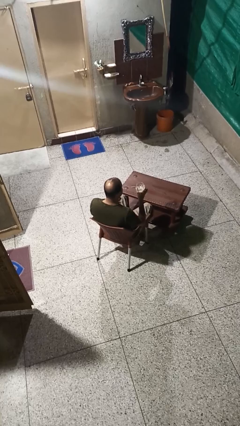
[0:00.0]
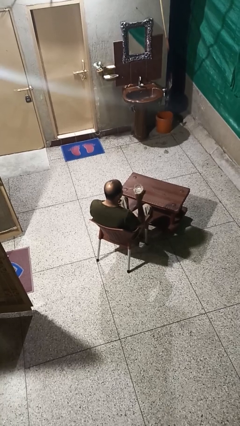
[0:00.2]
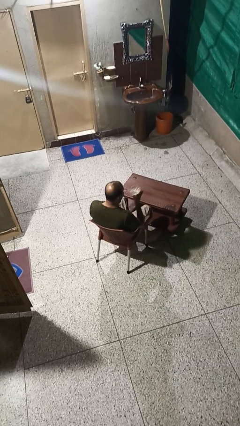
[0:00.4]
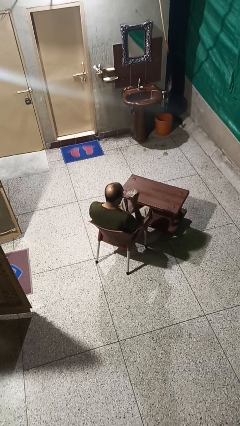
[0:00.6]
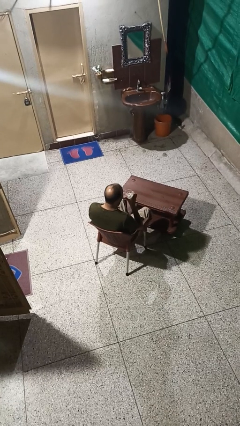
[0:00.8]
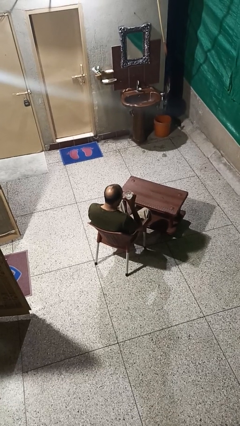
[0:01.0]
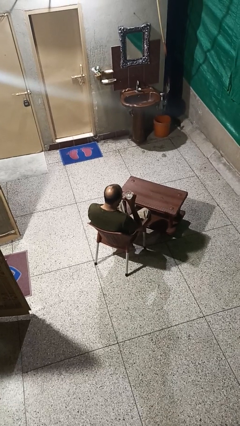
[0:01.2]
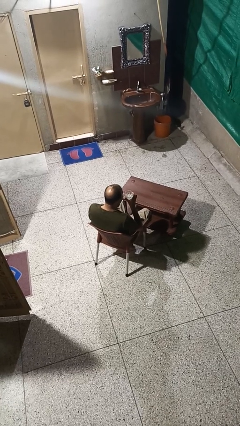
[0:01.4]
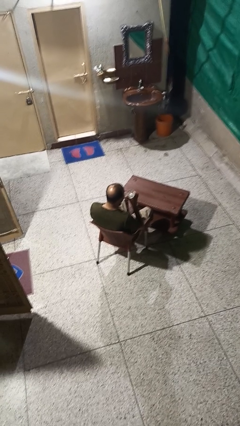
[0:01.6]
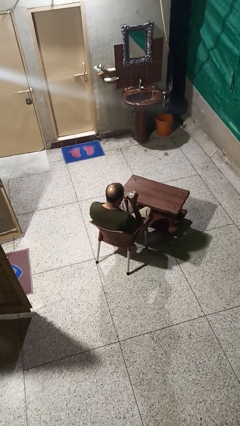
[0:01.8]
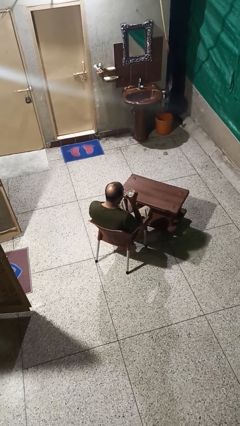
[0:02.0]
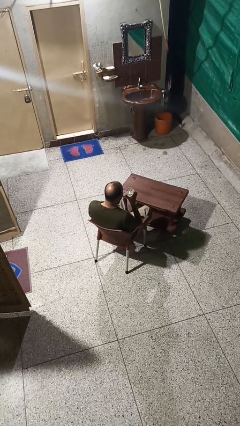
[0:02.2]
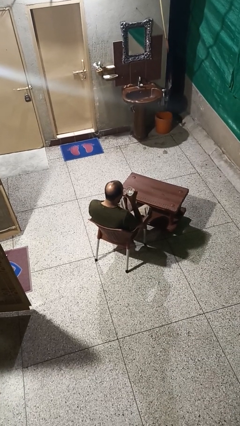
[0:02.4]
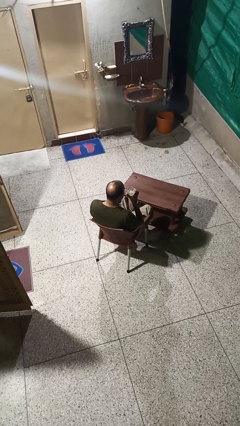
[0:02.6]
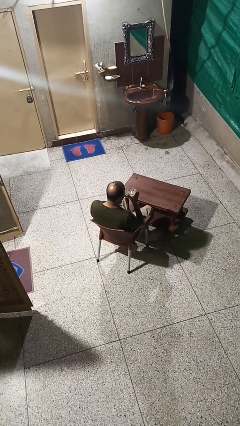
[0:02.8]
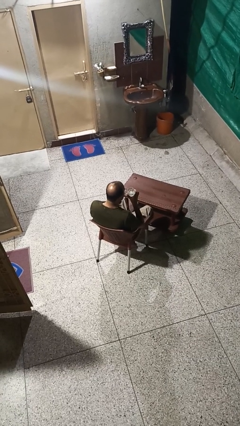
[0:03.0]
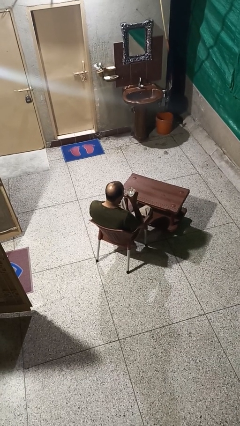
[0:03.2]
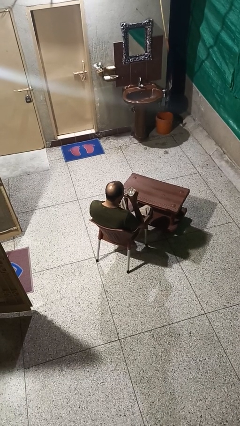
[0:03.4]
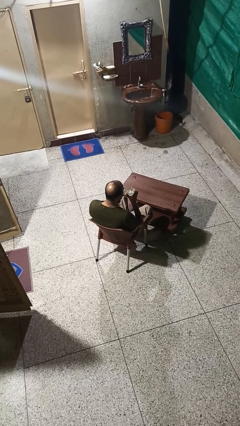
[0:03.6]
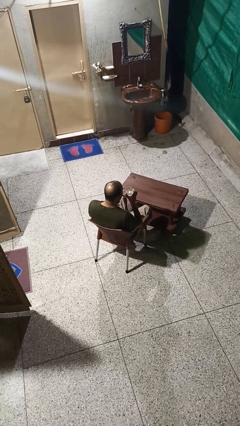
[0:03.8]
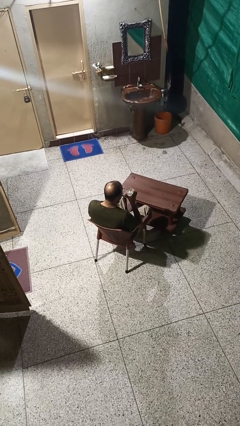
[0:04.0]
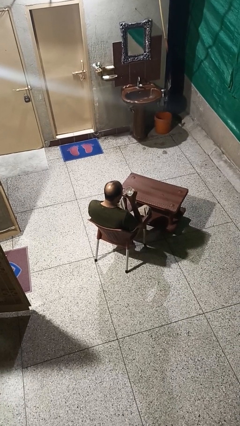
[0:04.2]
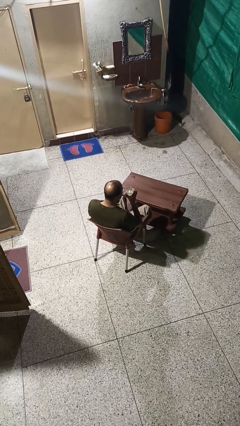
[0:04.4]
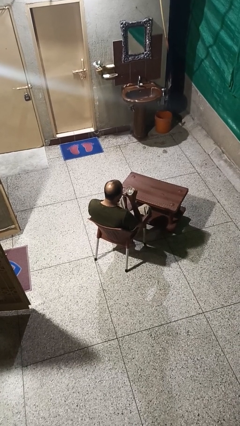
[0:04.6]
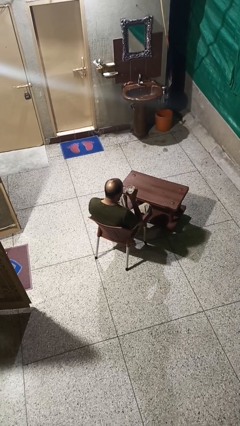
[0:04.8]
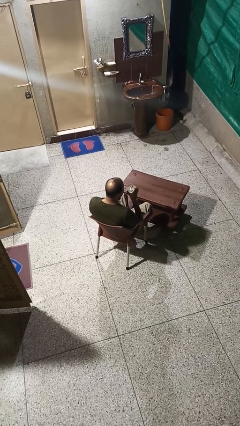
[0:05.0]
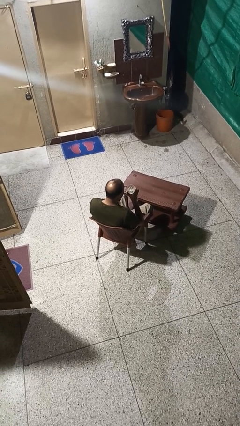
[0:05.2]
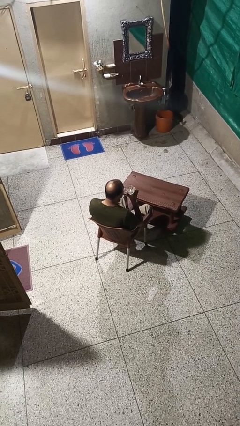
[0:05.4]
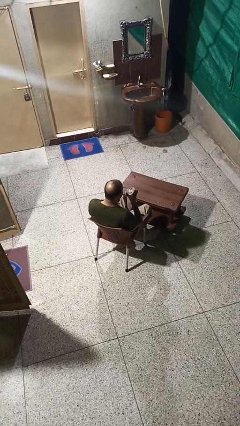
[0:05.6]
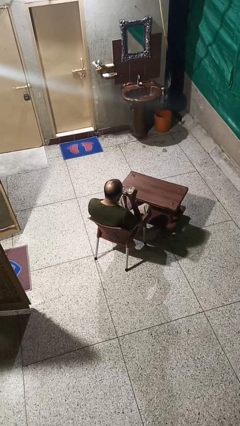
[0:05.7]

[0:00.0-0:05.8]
person drinks from straw

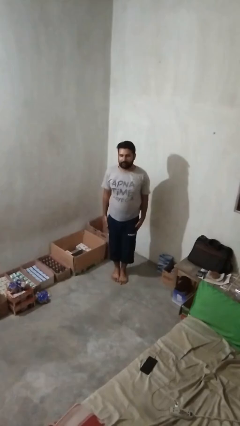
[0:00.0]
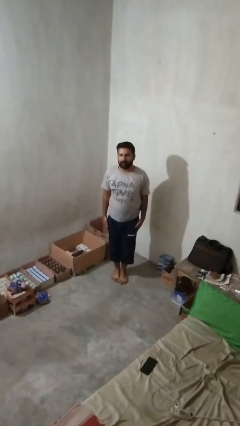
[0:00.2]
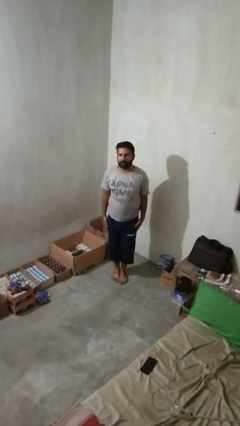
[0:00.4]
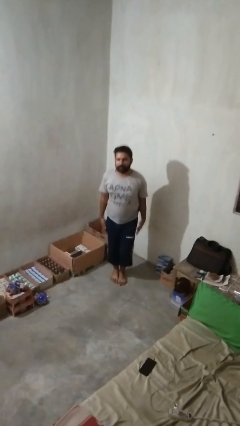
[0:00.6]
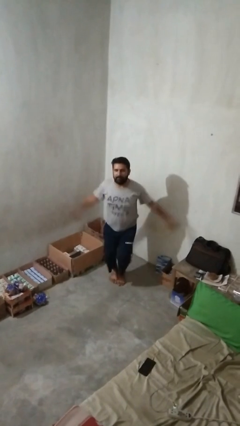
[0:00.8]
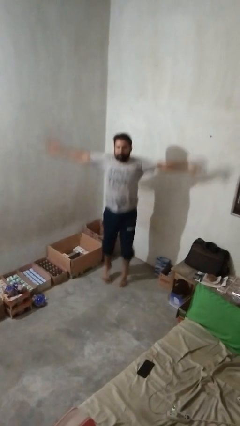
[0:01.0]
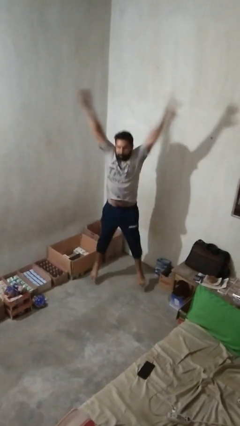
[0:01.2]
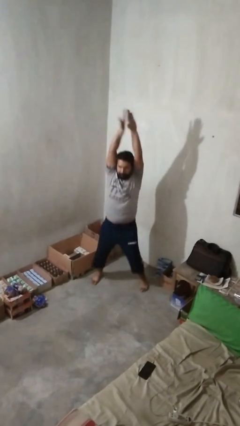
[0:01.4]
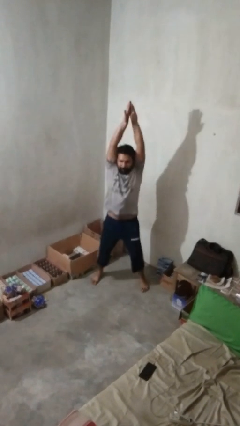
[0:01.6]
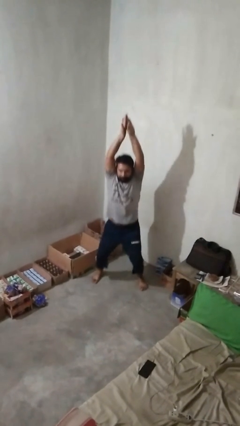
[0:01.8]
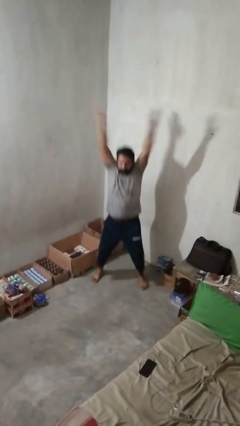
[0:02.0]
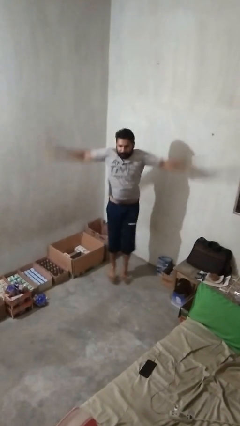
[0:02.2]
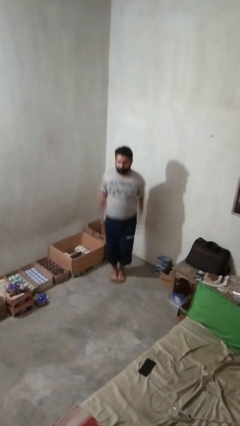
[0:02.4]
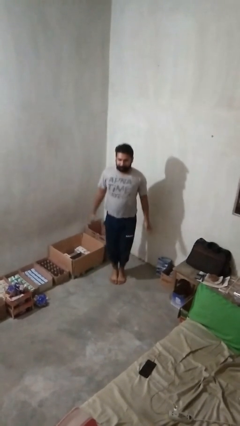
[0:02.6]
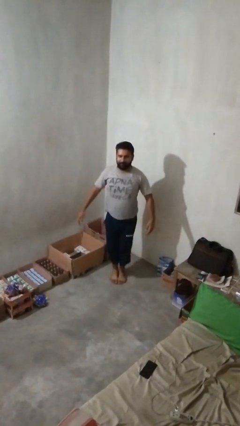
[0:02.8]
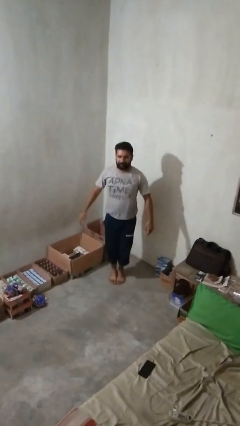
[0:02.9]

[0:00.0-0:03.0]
person exercises with jumping jacks

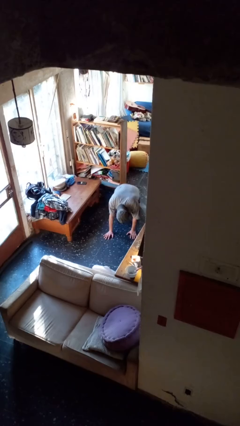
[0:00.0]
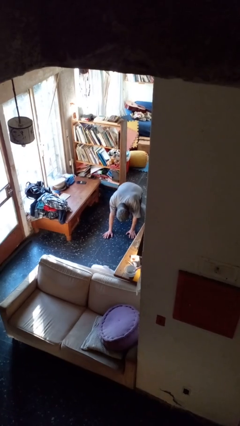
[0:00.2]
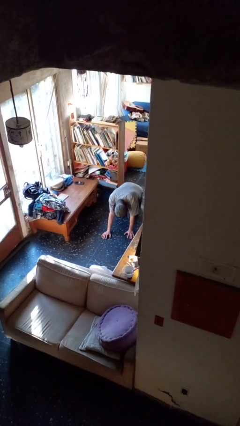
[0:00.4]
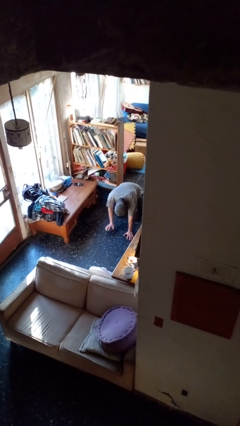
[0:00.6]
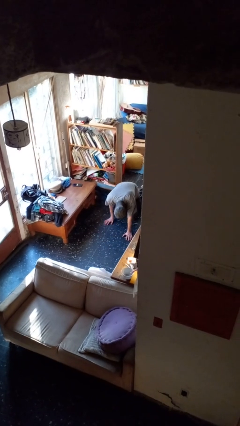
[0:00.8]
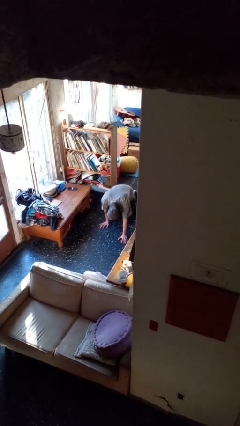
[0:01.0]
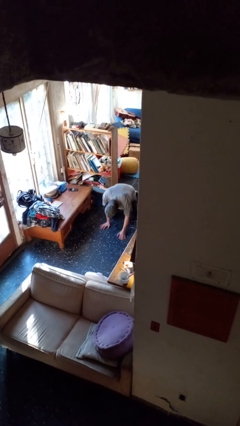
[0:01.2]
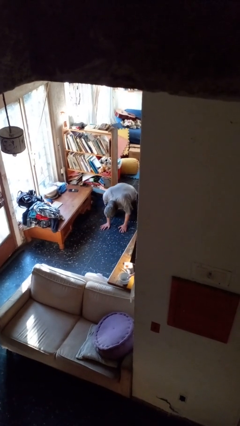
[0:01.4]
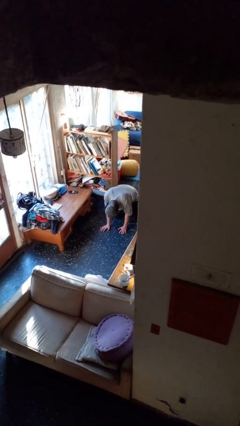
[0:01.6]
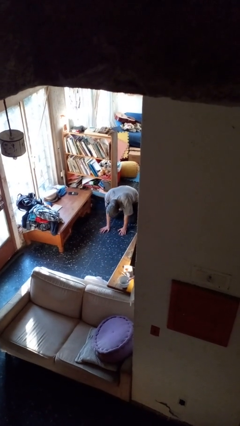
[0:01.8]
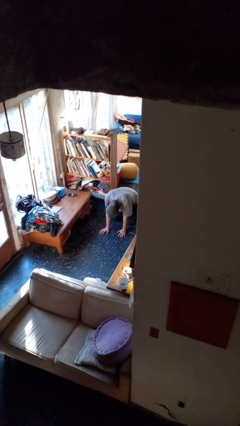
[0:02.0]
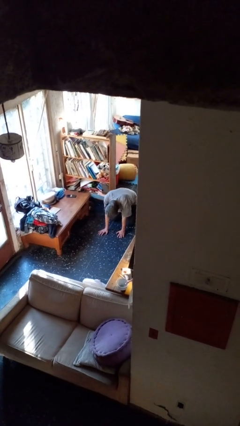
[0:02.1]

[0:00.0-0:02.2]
person crawls

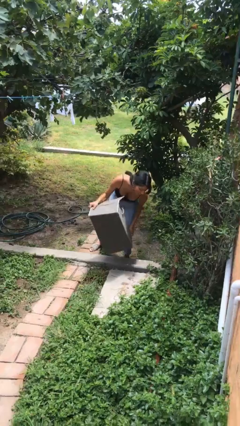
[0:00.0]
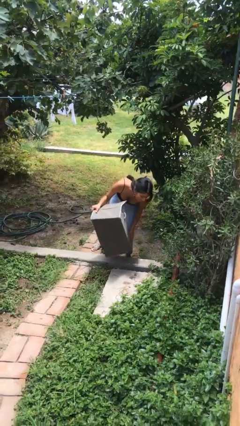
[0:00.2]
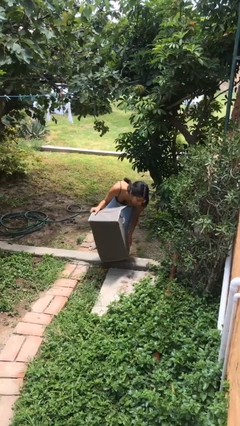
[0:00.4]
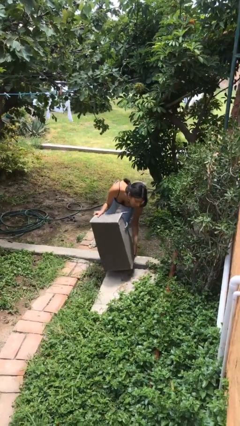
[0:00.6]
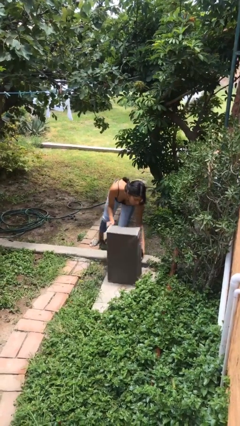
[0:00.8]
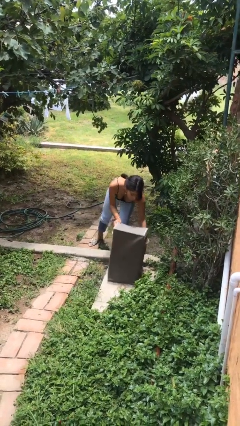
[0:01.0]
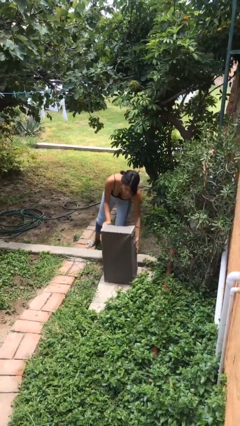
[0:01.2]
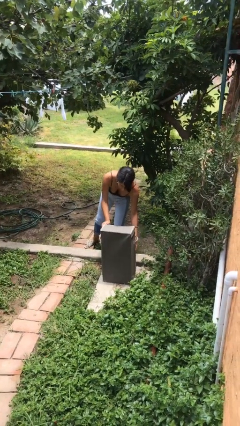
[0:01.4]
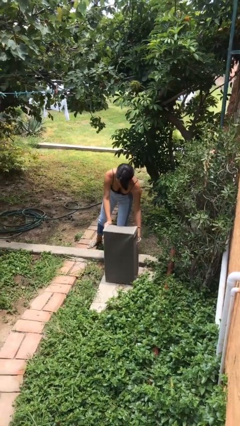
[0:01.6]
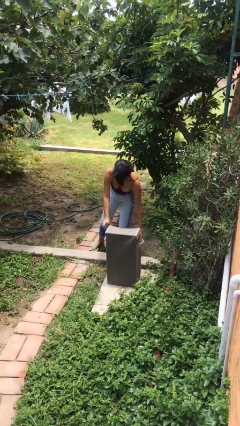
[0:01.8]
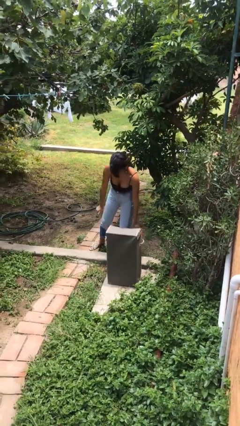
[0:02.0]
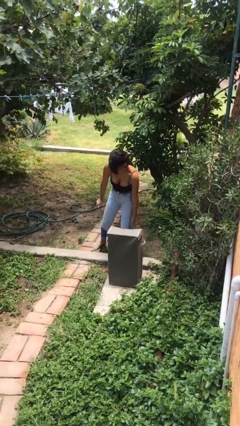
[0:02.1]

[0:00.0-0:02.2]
person puts down object on floor

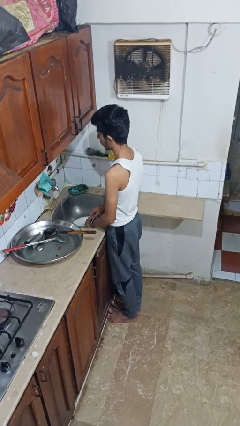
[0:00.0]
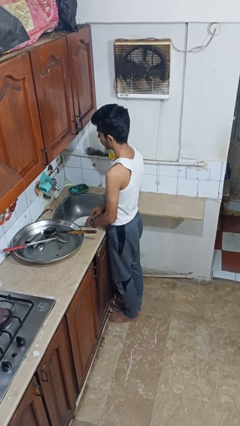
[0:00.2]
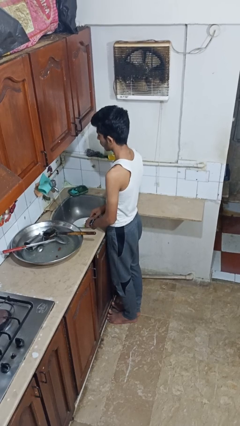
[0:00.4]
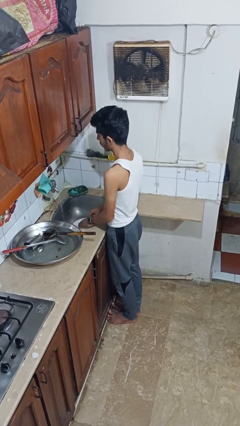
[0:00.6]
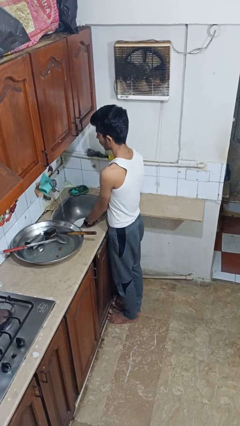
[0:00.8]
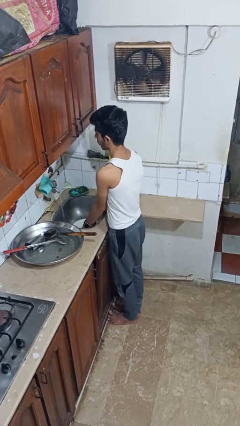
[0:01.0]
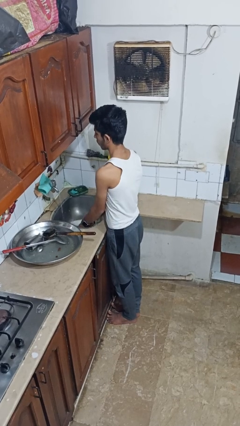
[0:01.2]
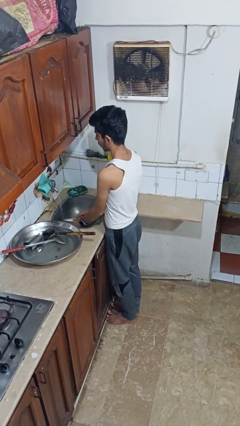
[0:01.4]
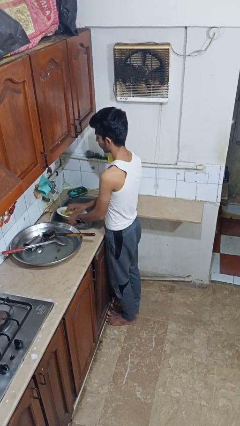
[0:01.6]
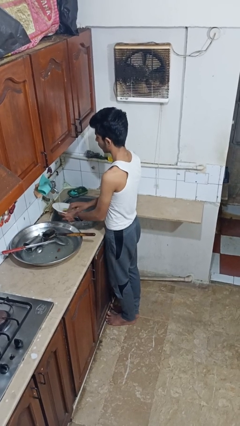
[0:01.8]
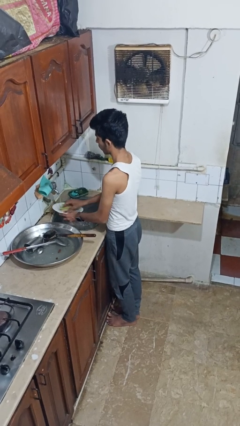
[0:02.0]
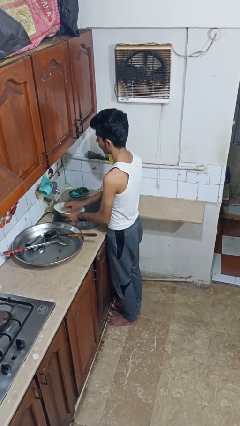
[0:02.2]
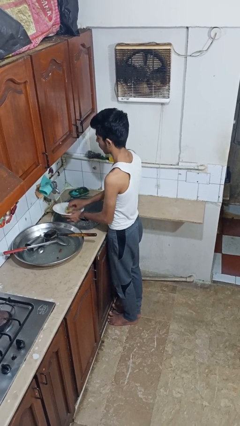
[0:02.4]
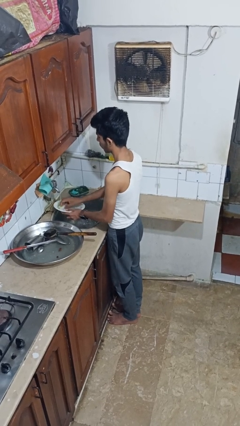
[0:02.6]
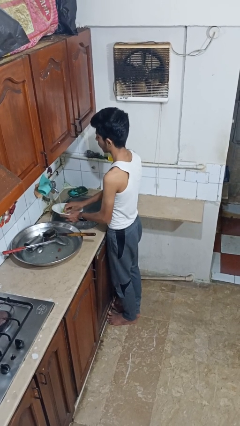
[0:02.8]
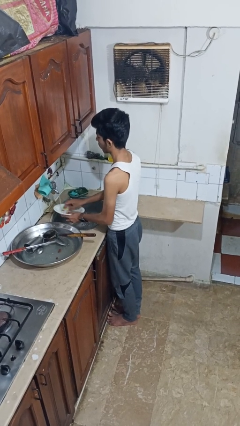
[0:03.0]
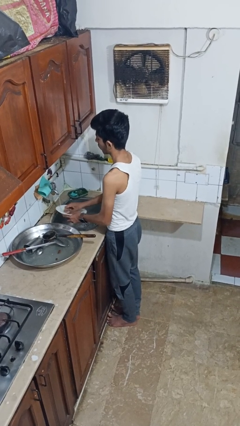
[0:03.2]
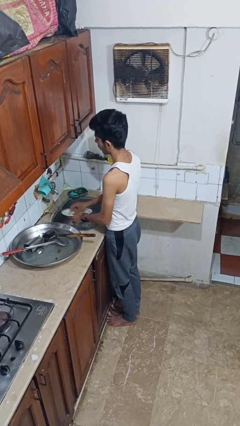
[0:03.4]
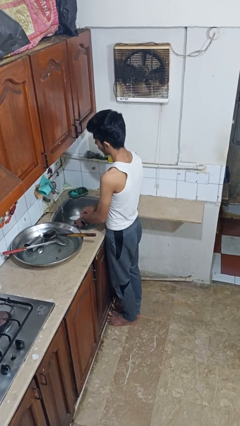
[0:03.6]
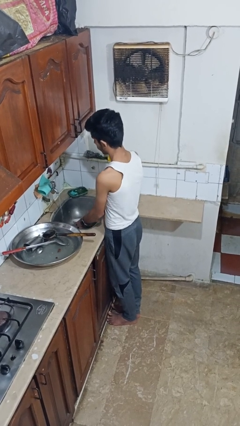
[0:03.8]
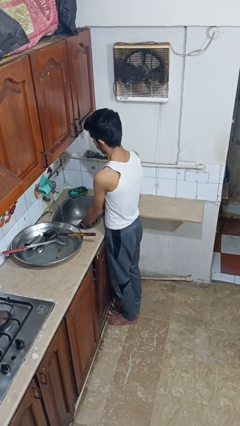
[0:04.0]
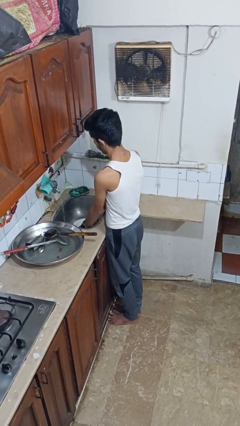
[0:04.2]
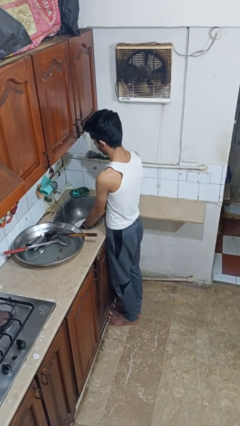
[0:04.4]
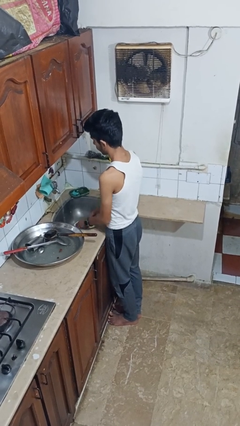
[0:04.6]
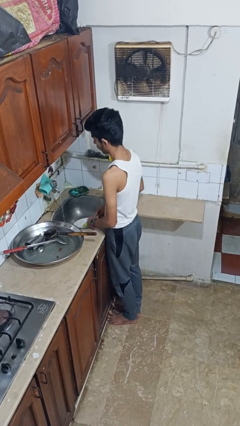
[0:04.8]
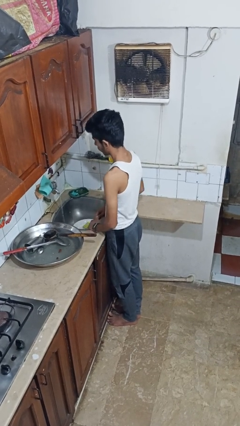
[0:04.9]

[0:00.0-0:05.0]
person washes dish
